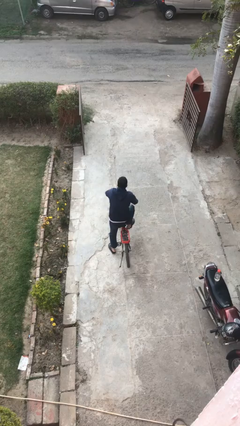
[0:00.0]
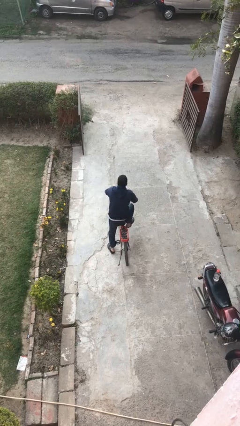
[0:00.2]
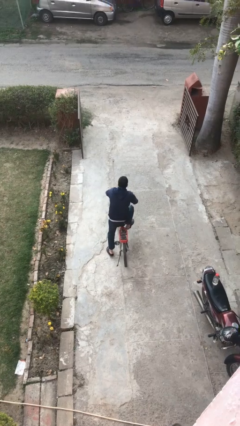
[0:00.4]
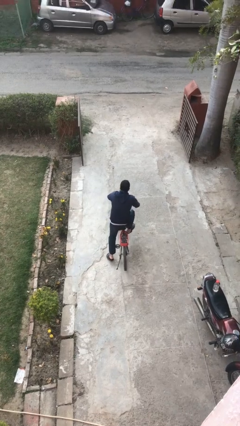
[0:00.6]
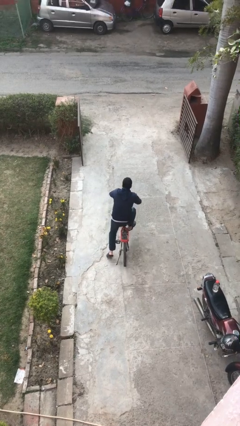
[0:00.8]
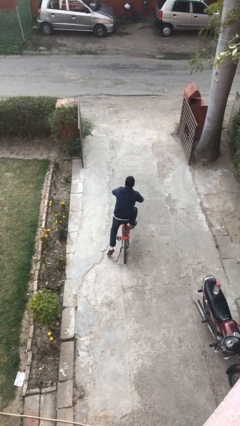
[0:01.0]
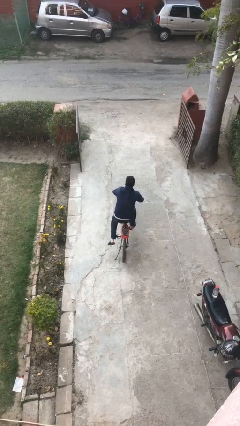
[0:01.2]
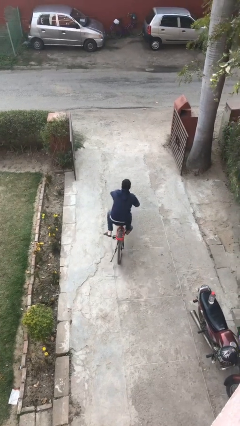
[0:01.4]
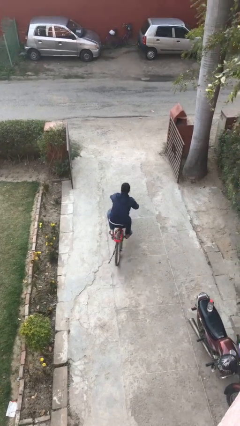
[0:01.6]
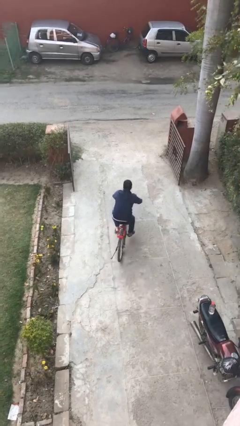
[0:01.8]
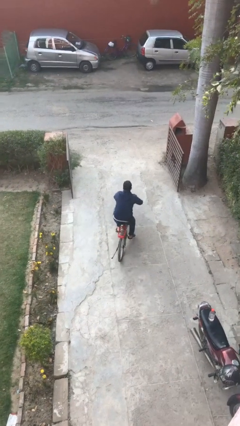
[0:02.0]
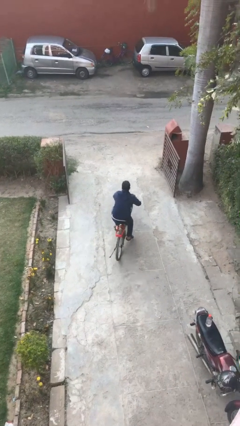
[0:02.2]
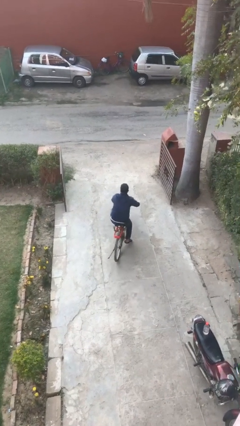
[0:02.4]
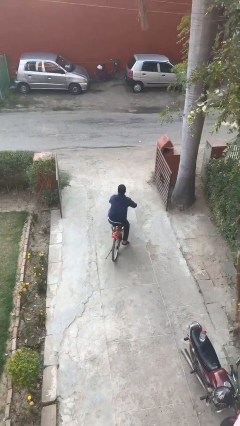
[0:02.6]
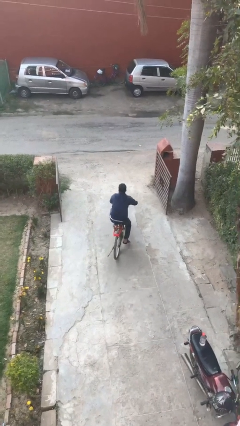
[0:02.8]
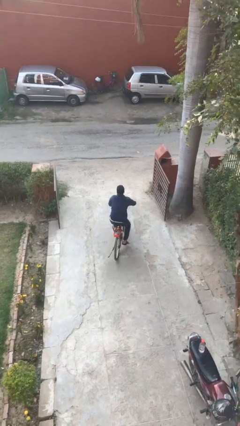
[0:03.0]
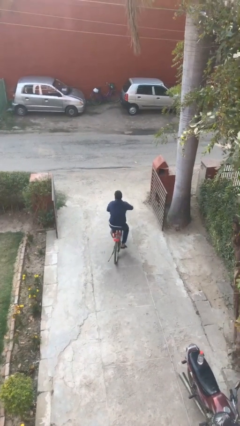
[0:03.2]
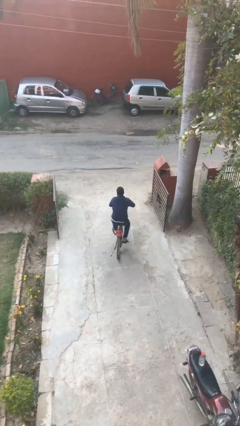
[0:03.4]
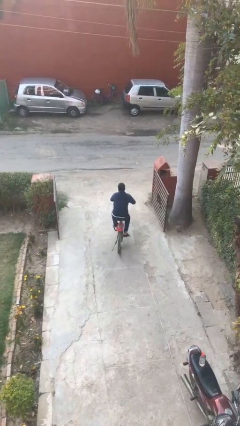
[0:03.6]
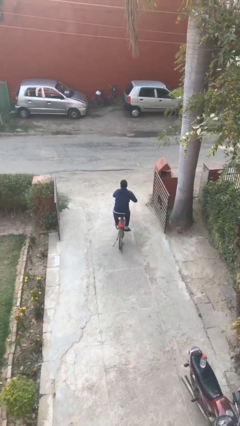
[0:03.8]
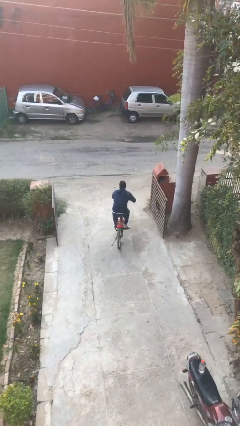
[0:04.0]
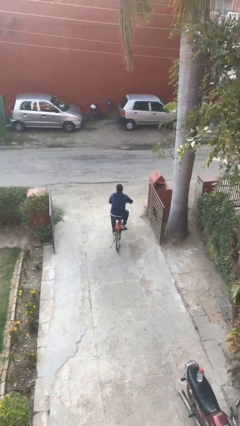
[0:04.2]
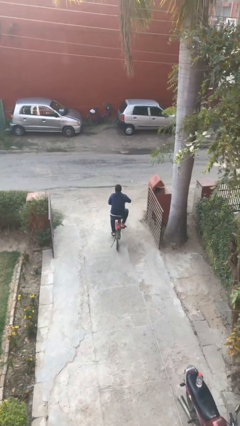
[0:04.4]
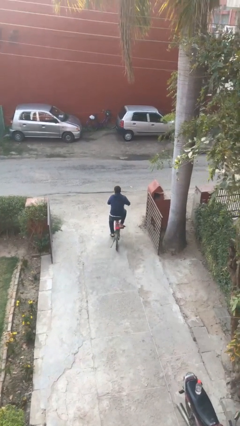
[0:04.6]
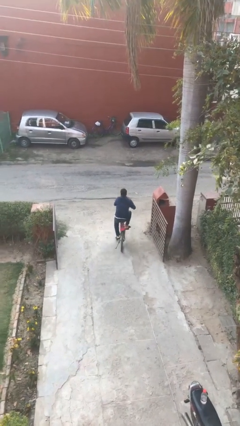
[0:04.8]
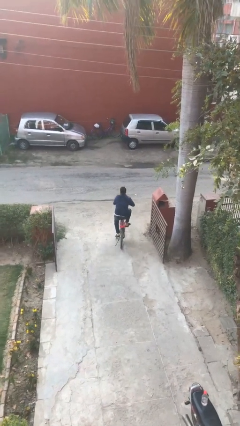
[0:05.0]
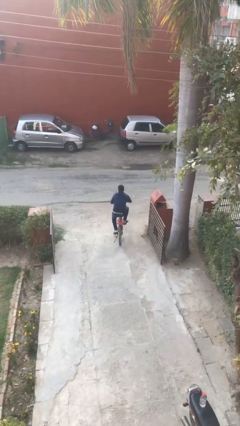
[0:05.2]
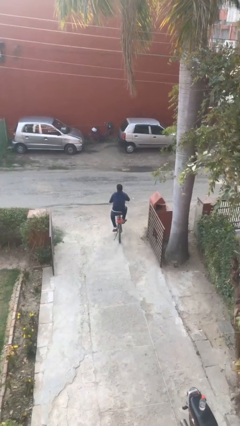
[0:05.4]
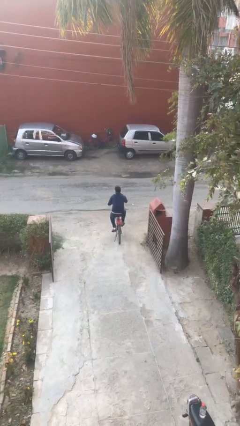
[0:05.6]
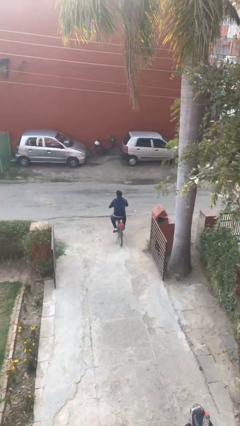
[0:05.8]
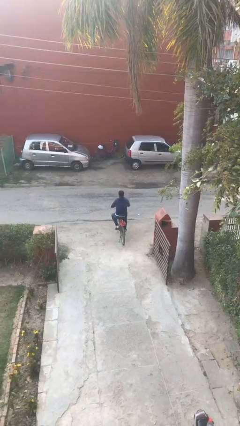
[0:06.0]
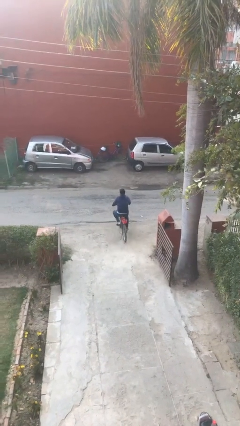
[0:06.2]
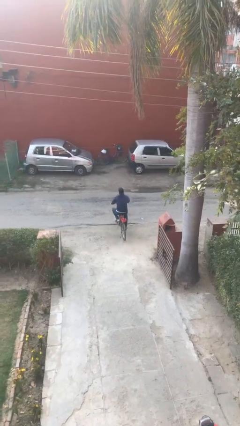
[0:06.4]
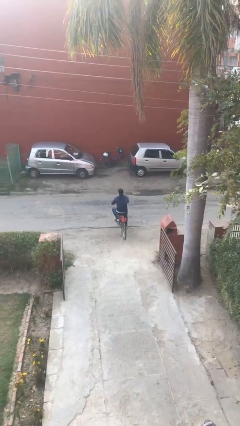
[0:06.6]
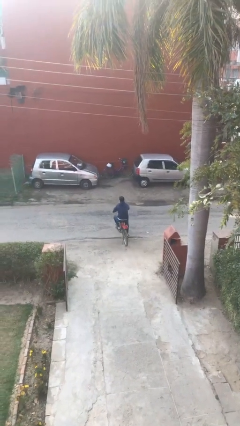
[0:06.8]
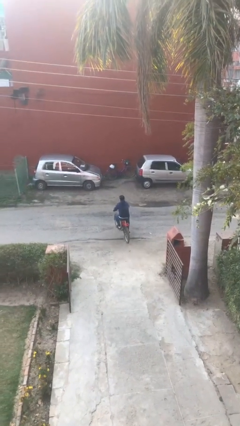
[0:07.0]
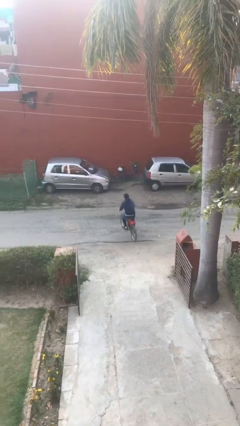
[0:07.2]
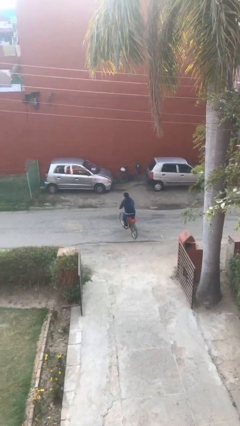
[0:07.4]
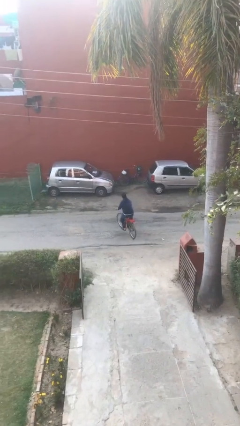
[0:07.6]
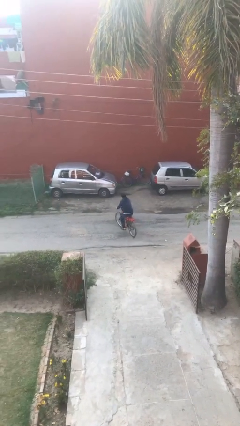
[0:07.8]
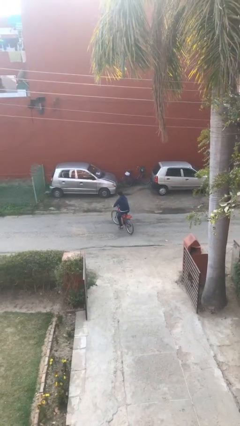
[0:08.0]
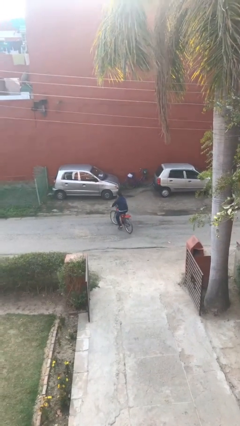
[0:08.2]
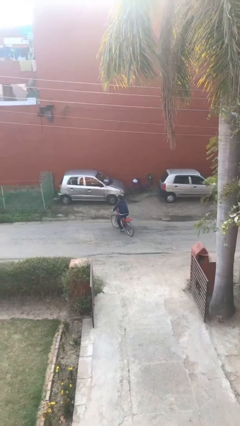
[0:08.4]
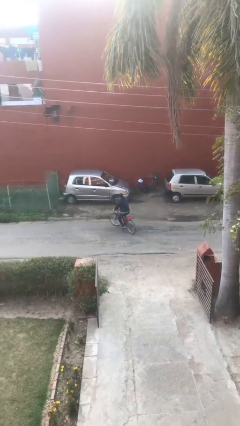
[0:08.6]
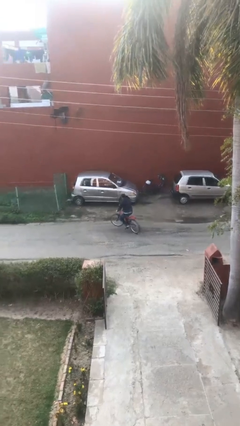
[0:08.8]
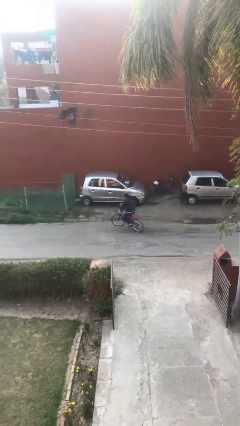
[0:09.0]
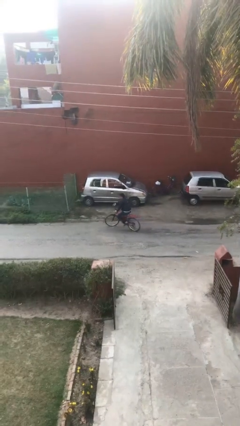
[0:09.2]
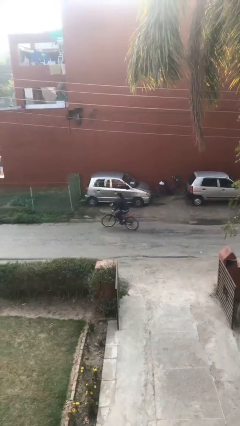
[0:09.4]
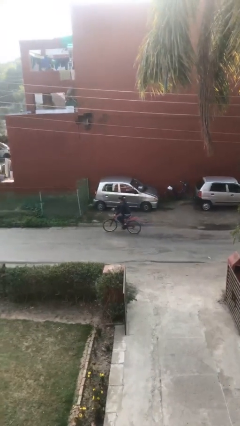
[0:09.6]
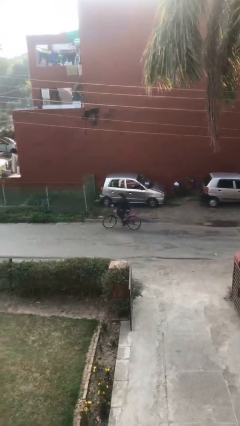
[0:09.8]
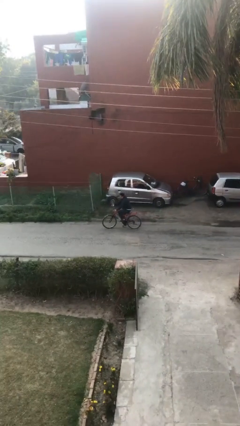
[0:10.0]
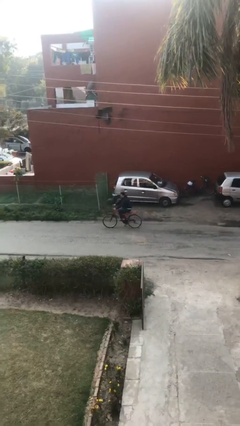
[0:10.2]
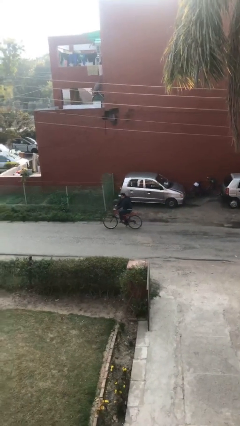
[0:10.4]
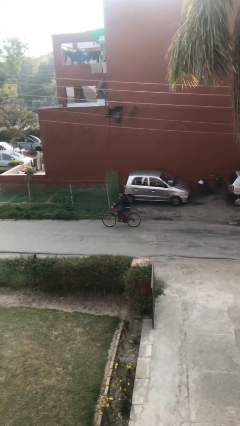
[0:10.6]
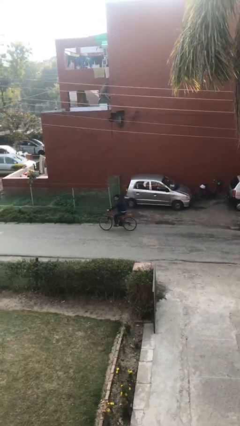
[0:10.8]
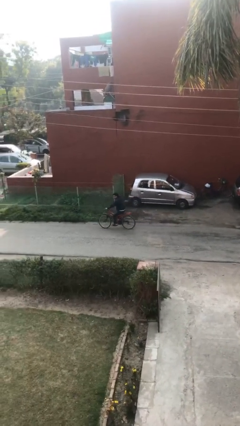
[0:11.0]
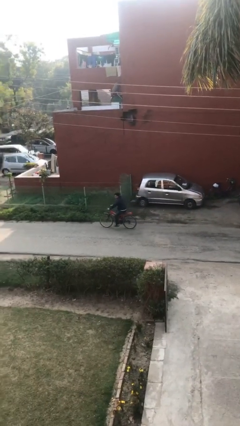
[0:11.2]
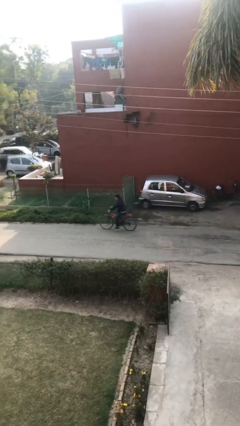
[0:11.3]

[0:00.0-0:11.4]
person rides bicycle

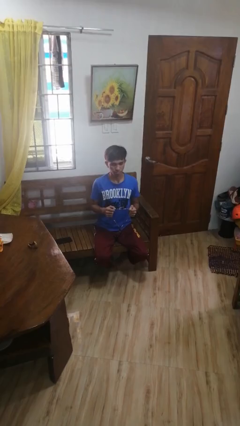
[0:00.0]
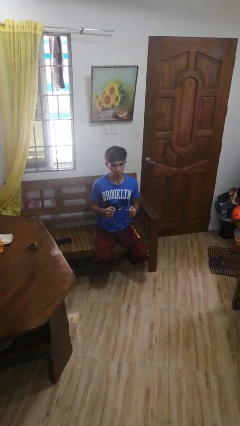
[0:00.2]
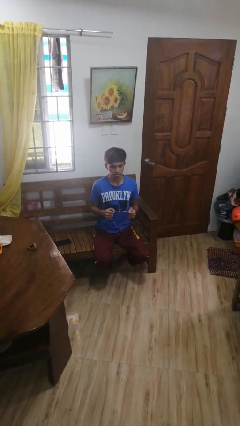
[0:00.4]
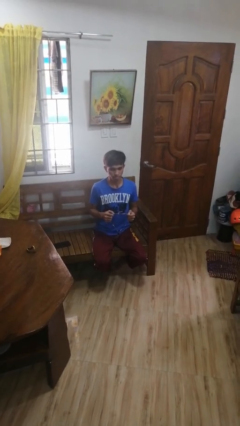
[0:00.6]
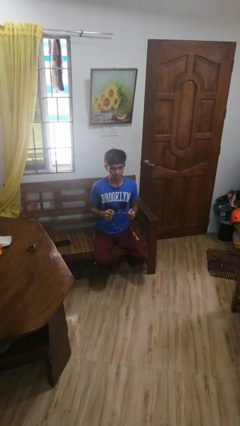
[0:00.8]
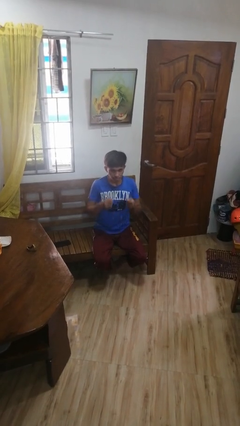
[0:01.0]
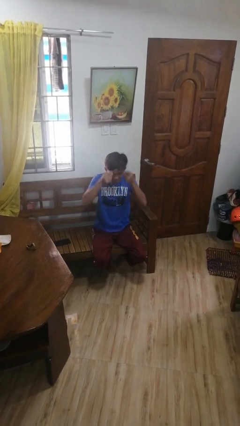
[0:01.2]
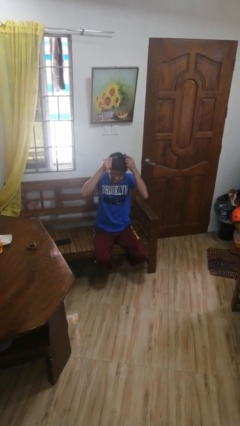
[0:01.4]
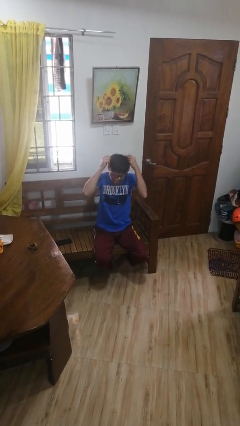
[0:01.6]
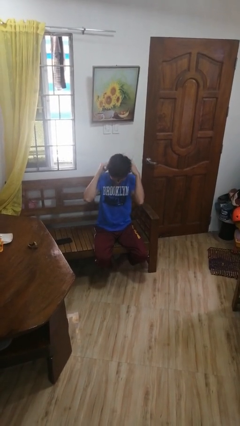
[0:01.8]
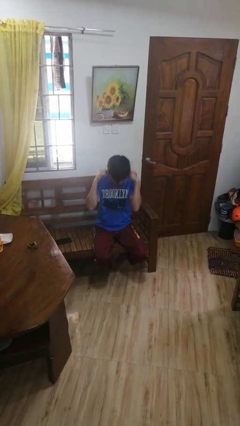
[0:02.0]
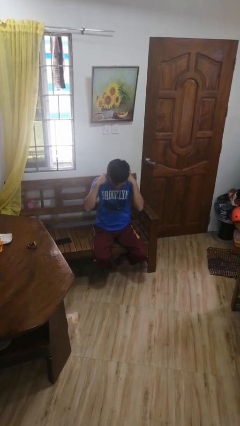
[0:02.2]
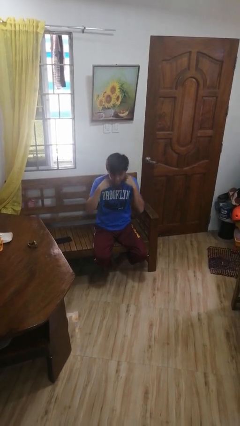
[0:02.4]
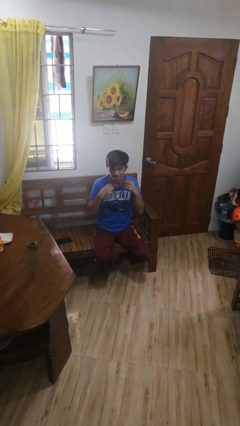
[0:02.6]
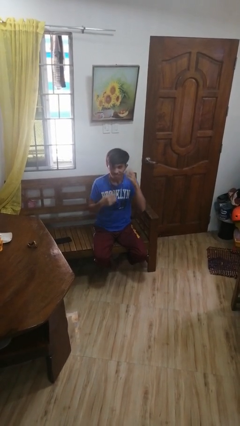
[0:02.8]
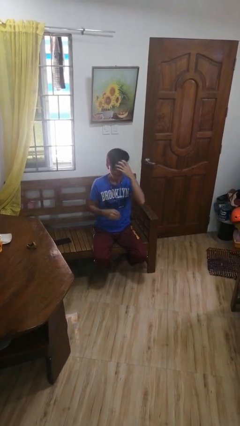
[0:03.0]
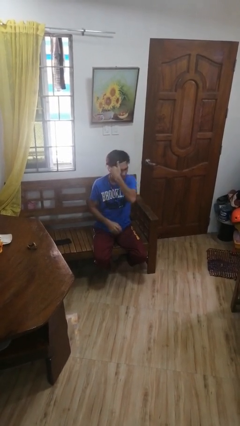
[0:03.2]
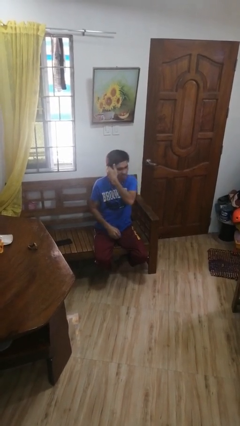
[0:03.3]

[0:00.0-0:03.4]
person puts on necklace

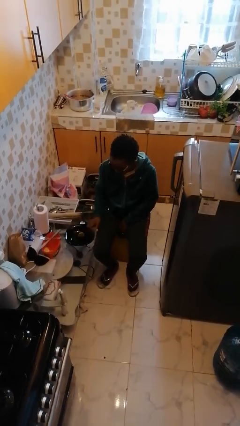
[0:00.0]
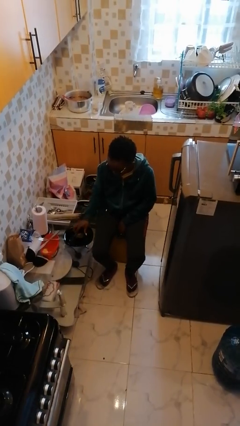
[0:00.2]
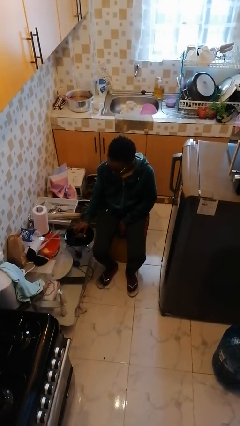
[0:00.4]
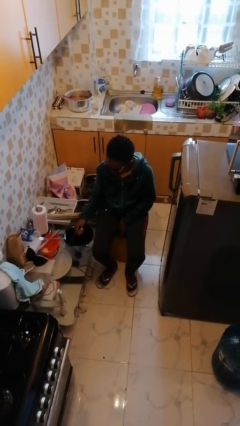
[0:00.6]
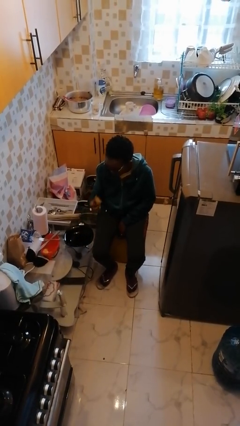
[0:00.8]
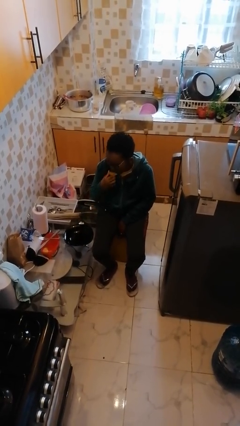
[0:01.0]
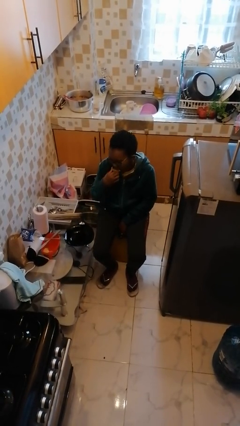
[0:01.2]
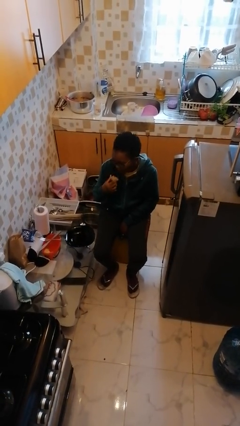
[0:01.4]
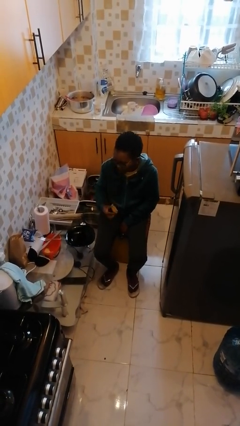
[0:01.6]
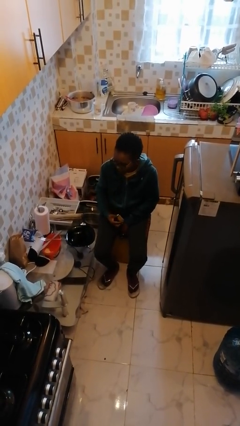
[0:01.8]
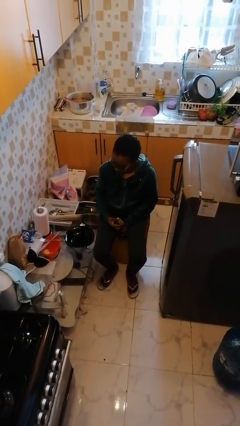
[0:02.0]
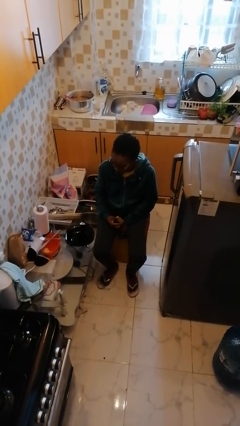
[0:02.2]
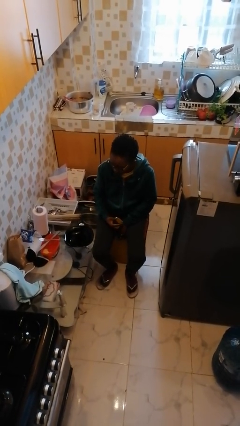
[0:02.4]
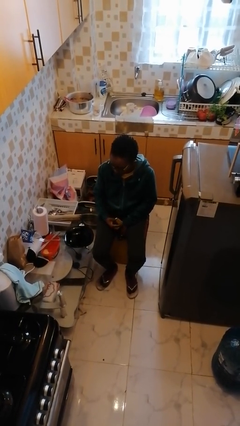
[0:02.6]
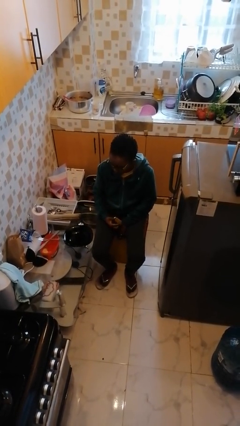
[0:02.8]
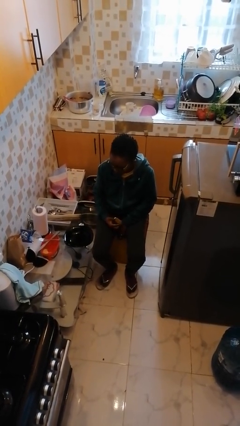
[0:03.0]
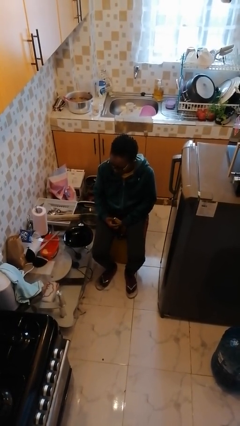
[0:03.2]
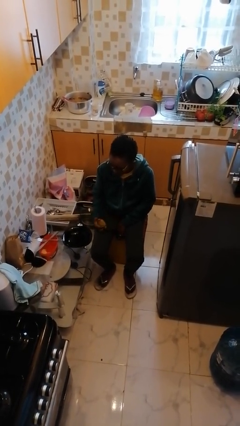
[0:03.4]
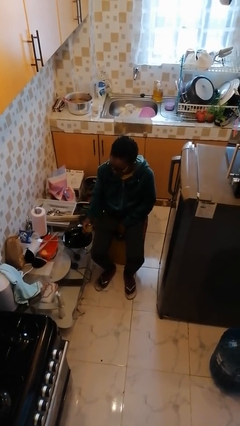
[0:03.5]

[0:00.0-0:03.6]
person eats with hands
